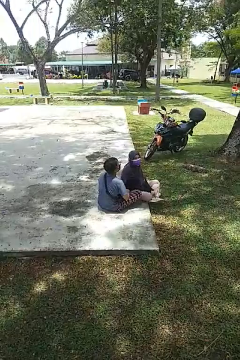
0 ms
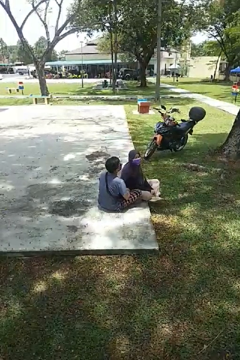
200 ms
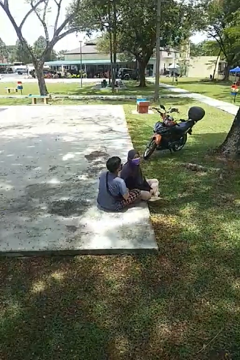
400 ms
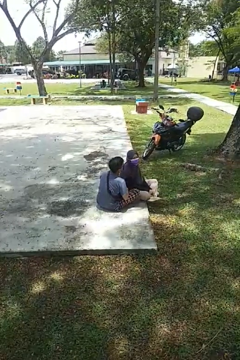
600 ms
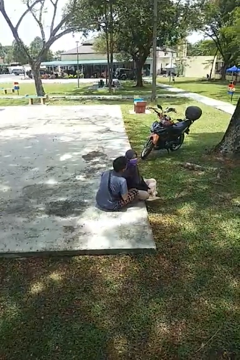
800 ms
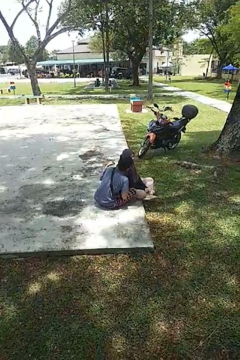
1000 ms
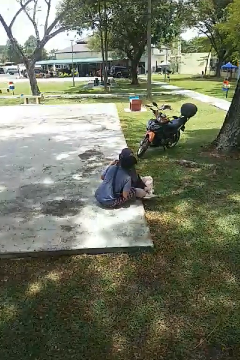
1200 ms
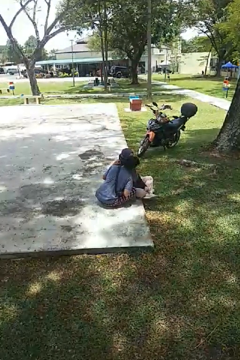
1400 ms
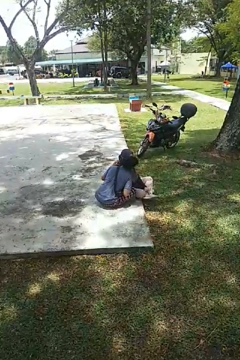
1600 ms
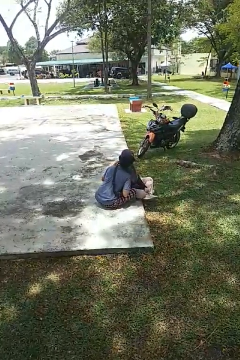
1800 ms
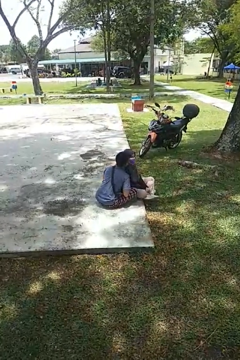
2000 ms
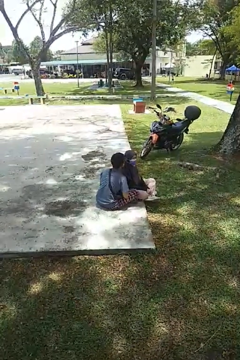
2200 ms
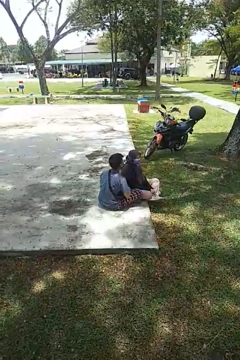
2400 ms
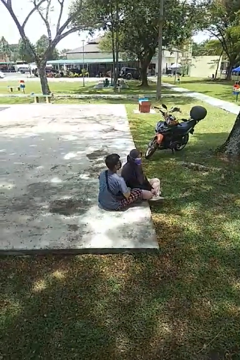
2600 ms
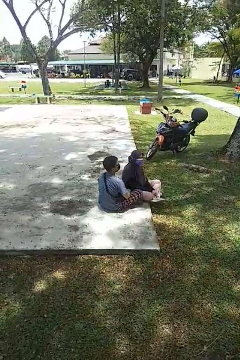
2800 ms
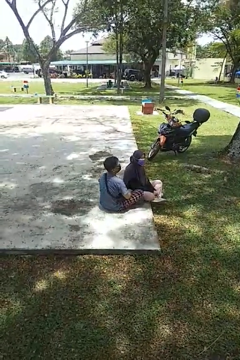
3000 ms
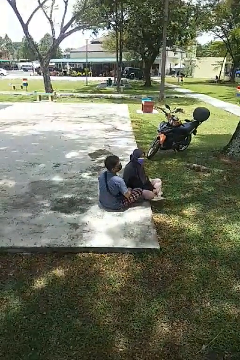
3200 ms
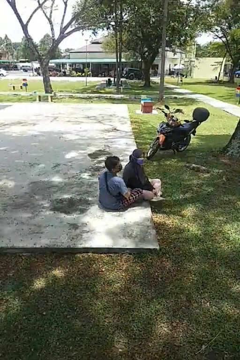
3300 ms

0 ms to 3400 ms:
person kisses cheek of person

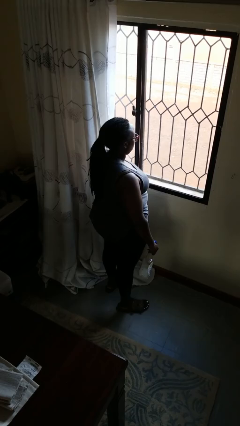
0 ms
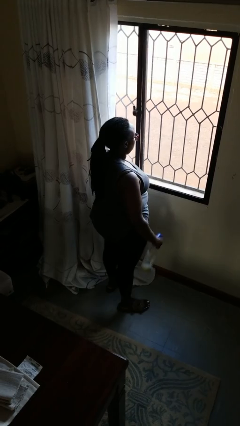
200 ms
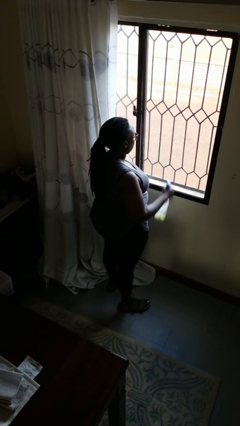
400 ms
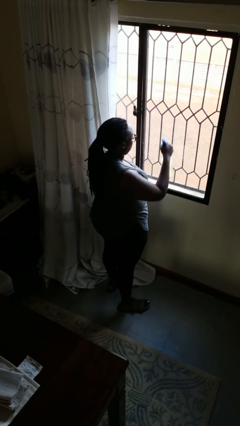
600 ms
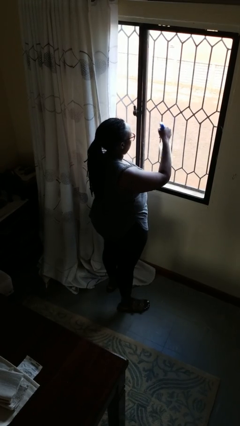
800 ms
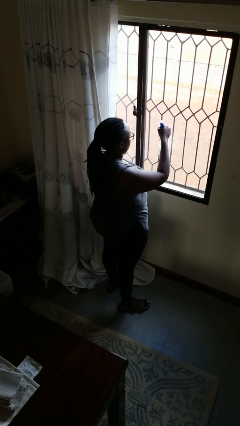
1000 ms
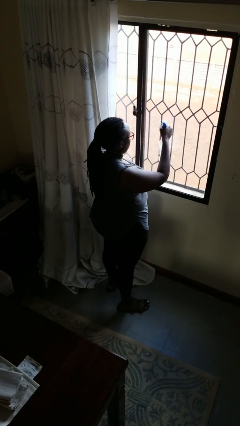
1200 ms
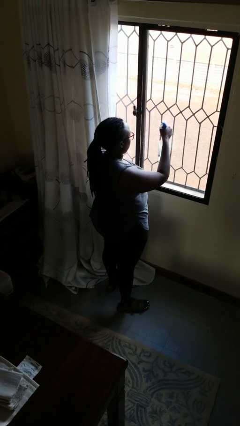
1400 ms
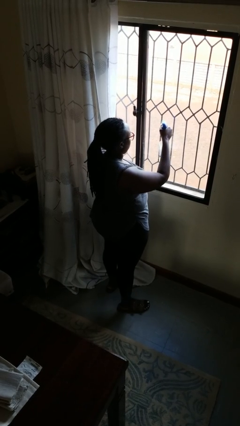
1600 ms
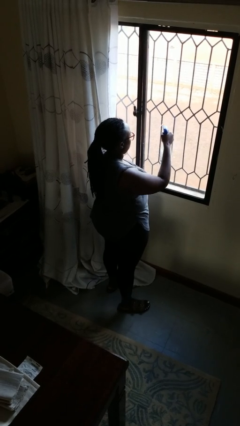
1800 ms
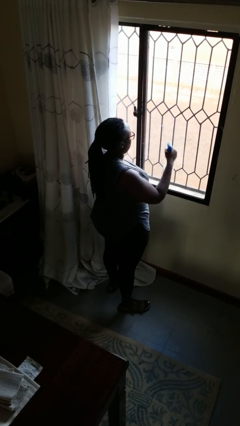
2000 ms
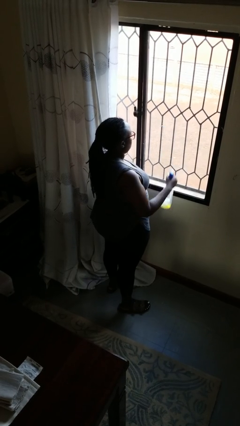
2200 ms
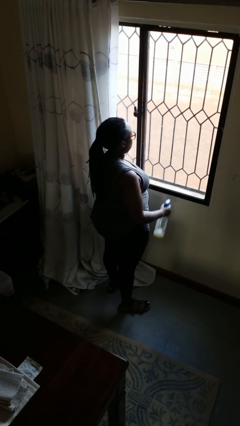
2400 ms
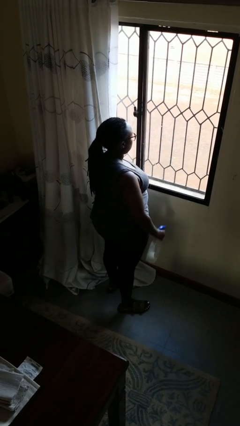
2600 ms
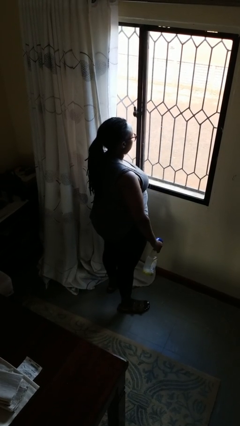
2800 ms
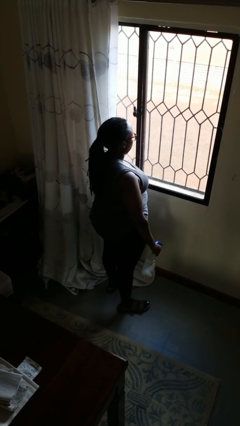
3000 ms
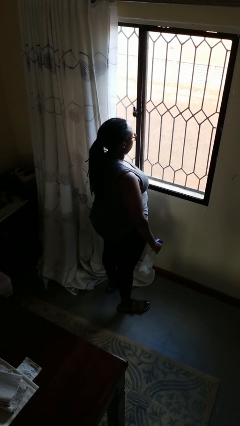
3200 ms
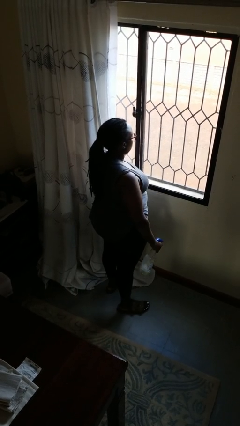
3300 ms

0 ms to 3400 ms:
person sprays from bottle

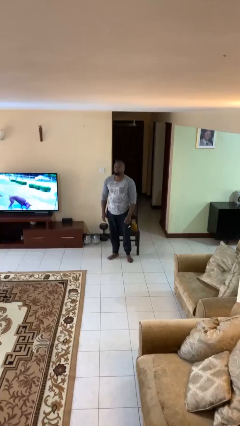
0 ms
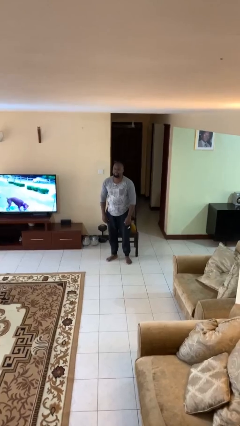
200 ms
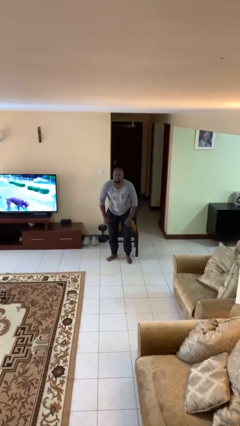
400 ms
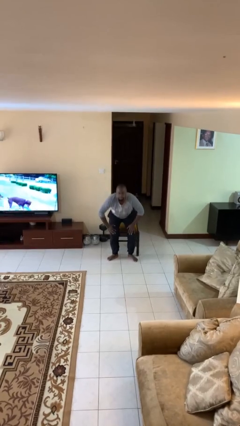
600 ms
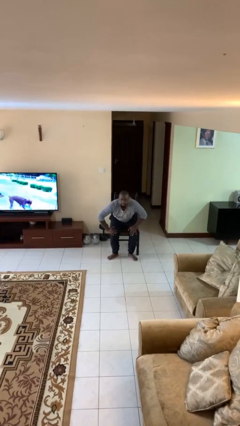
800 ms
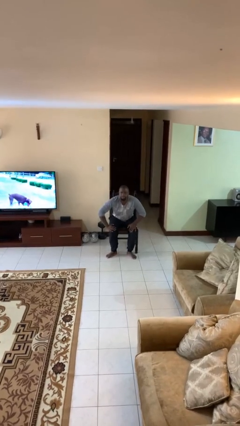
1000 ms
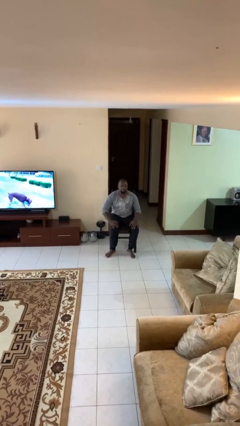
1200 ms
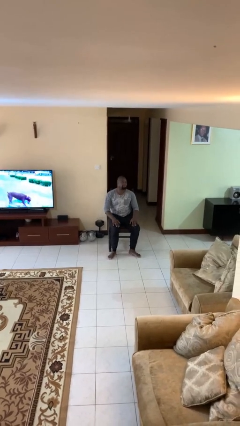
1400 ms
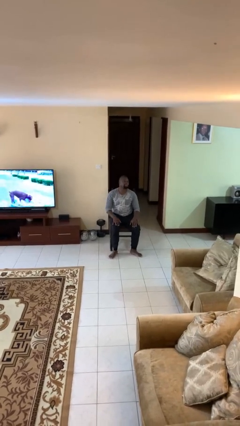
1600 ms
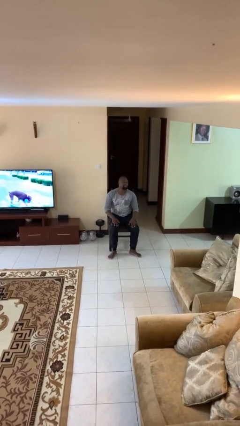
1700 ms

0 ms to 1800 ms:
person sits down

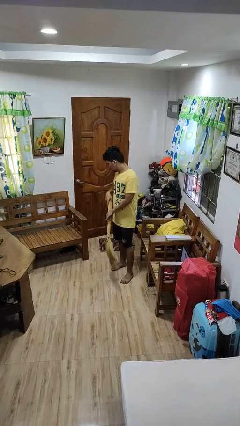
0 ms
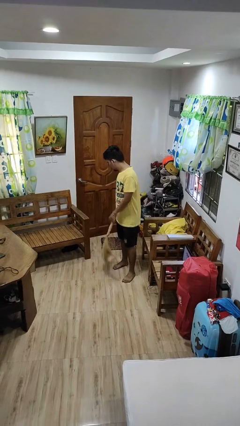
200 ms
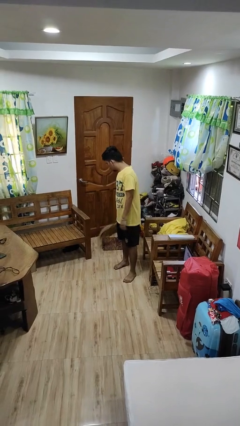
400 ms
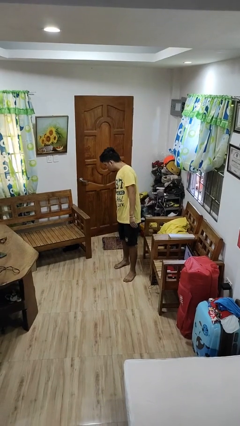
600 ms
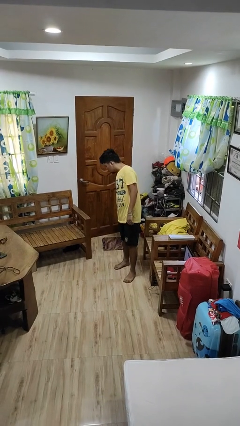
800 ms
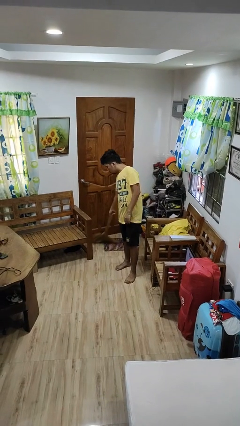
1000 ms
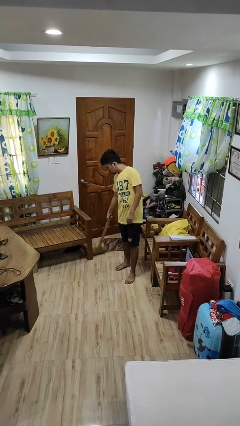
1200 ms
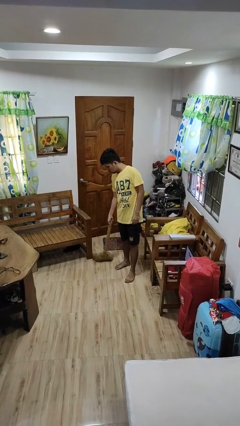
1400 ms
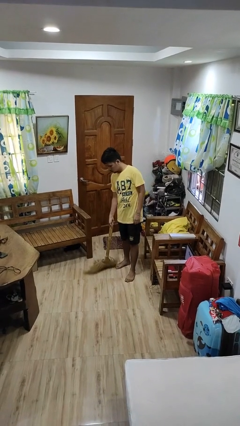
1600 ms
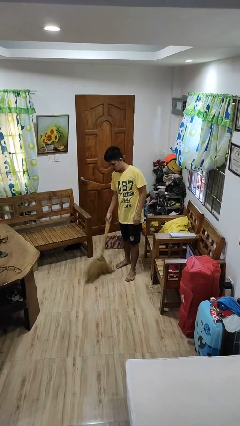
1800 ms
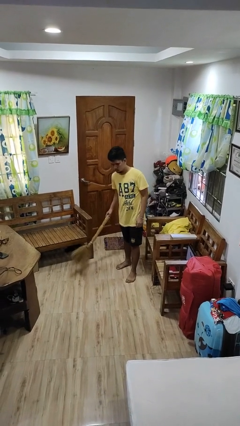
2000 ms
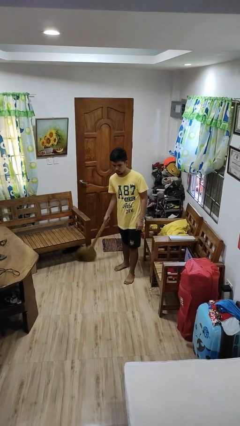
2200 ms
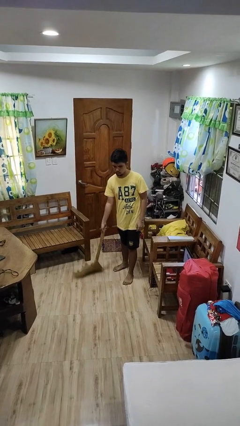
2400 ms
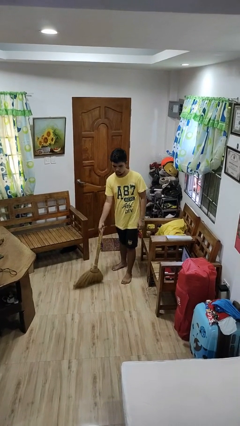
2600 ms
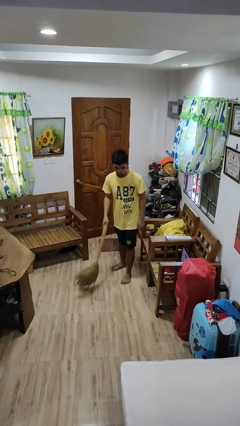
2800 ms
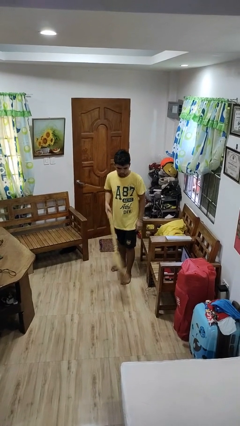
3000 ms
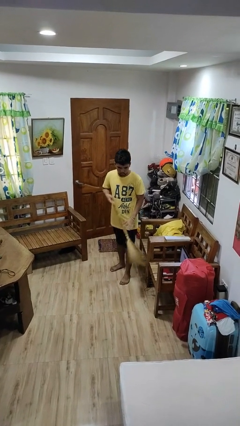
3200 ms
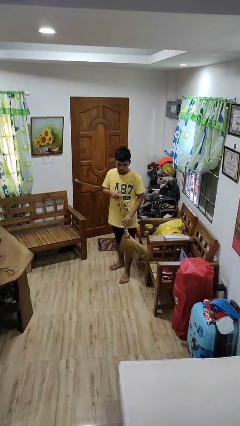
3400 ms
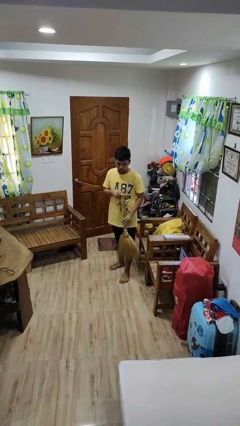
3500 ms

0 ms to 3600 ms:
person sweeps floor

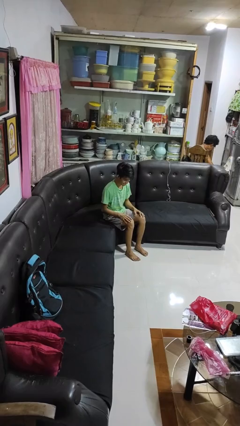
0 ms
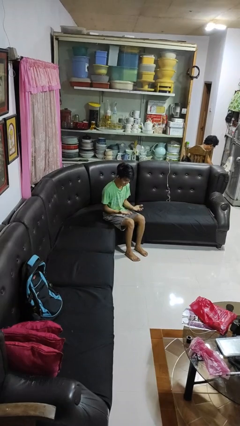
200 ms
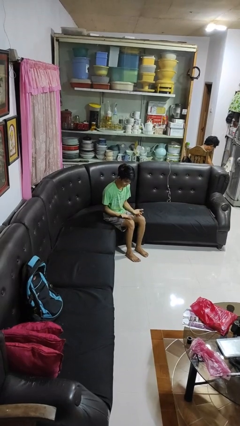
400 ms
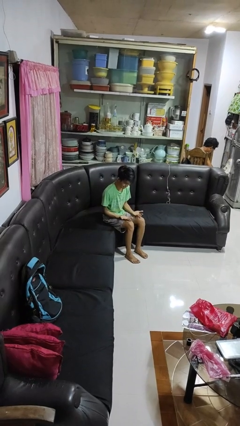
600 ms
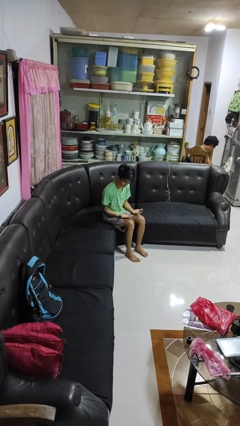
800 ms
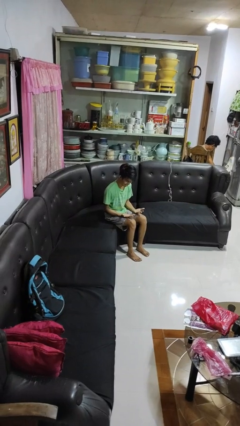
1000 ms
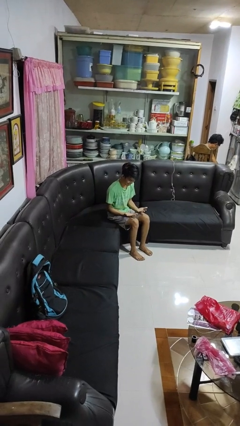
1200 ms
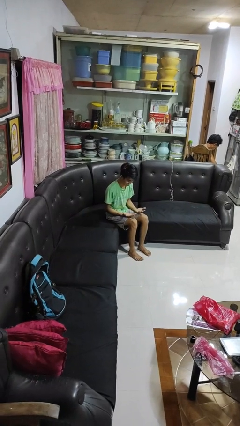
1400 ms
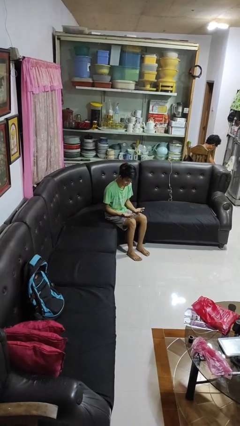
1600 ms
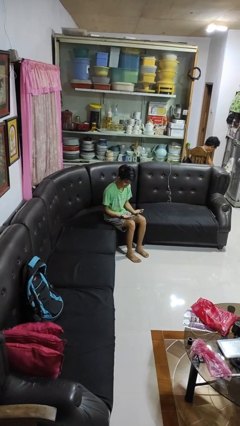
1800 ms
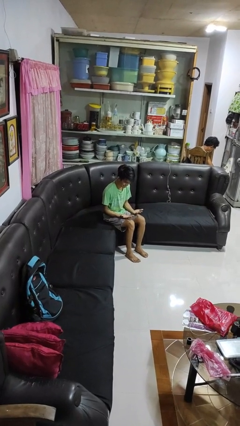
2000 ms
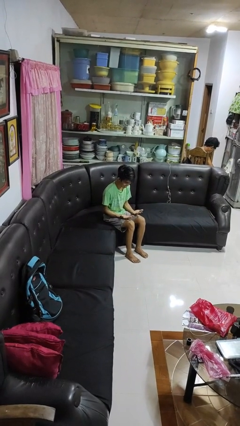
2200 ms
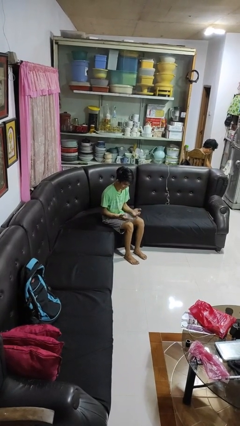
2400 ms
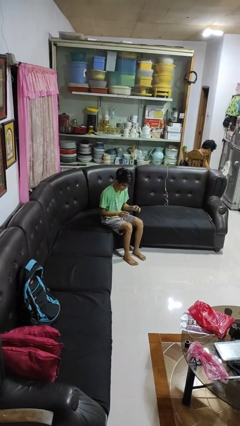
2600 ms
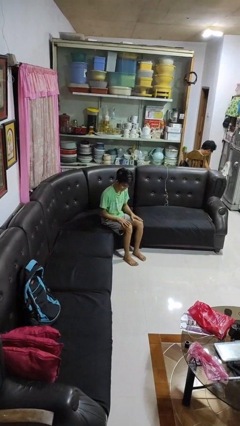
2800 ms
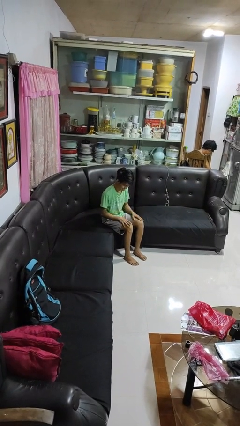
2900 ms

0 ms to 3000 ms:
person looks at hands in lap

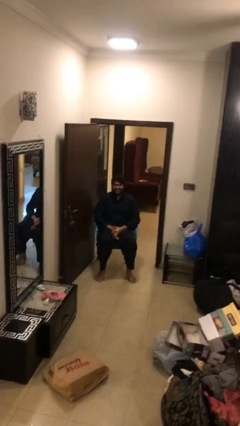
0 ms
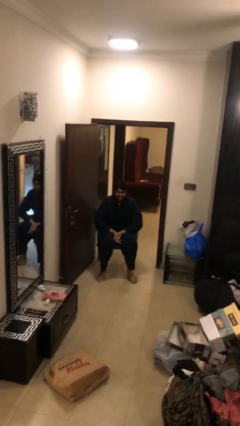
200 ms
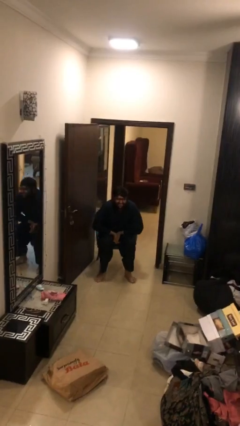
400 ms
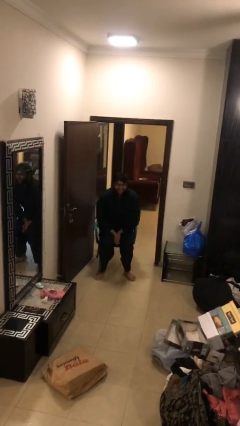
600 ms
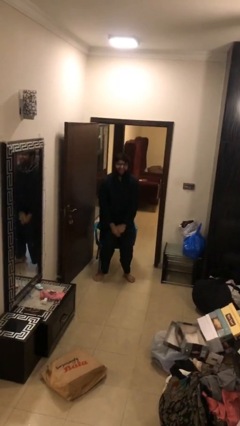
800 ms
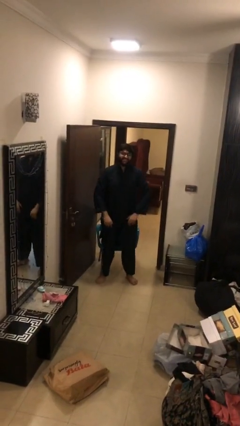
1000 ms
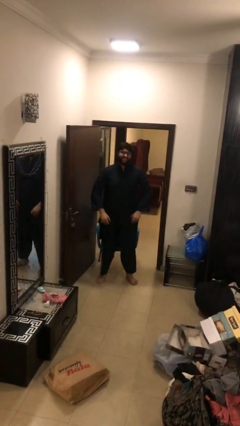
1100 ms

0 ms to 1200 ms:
person stands up

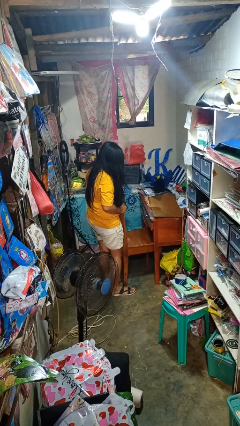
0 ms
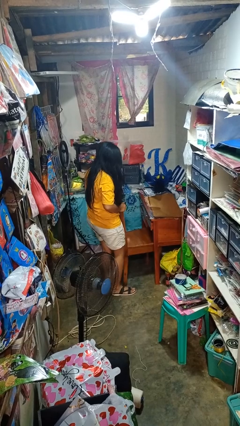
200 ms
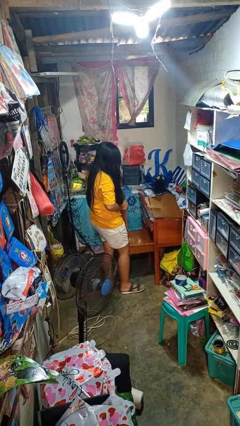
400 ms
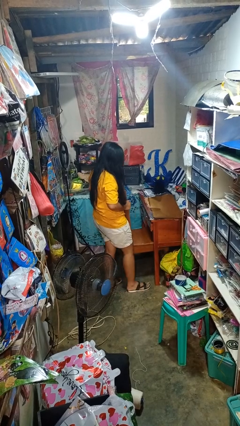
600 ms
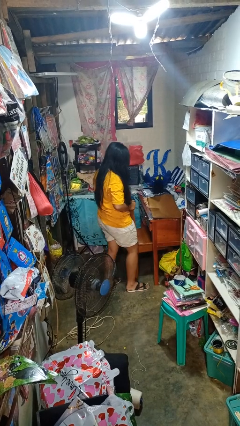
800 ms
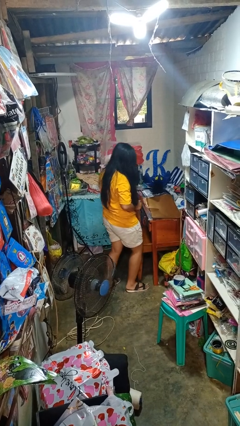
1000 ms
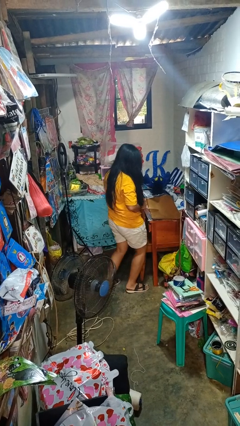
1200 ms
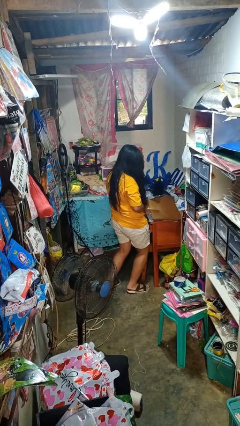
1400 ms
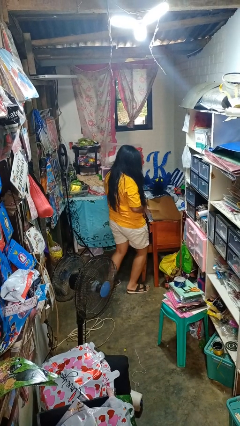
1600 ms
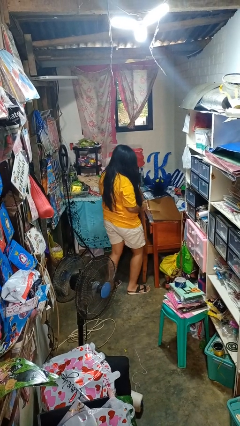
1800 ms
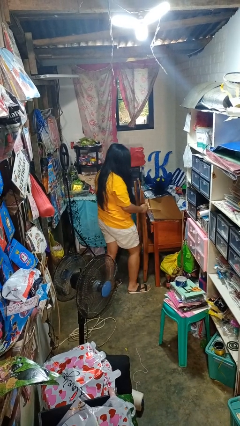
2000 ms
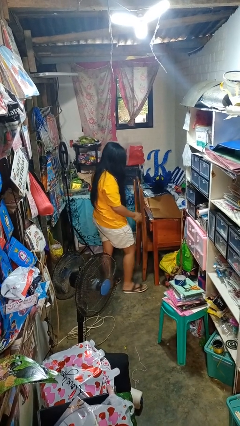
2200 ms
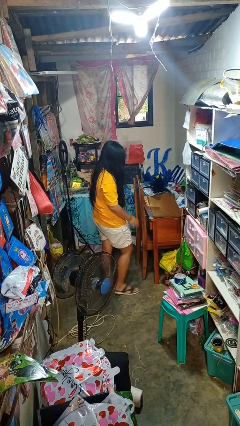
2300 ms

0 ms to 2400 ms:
person pushes in chair
